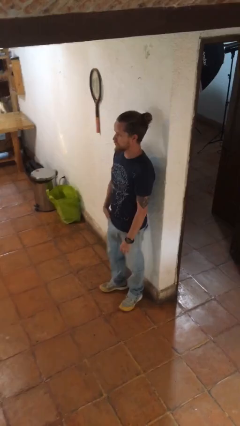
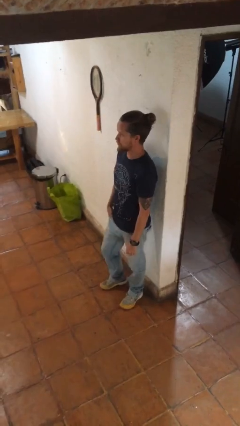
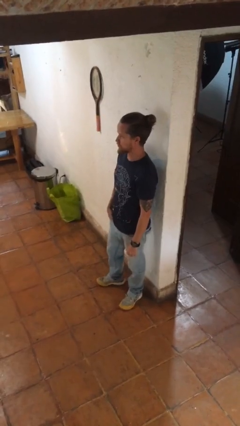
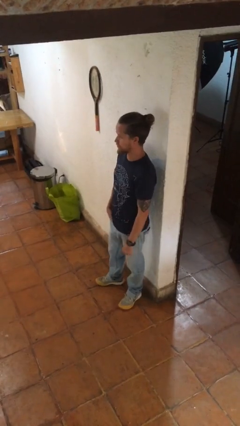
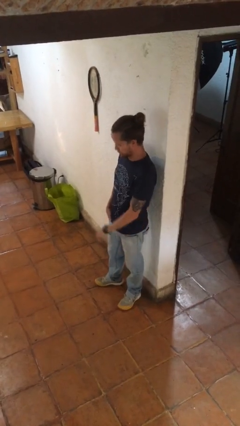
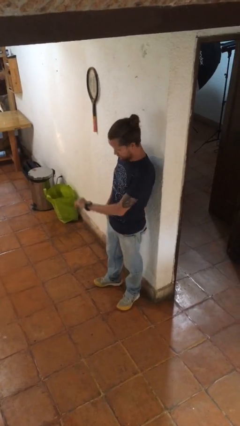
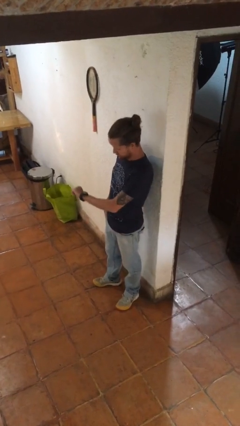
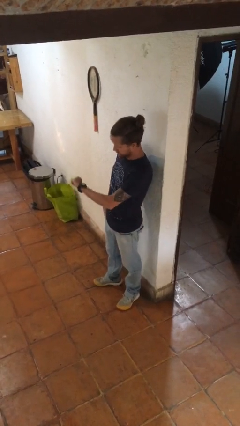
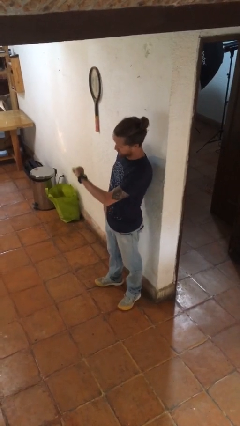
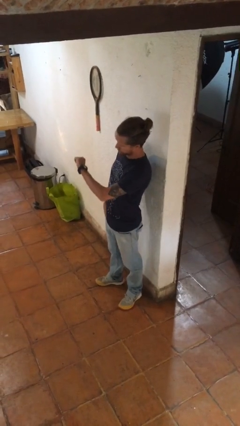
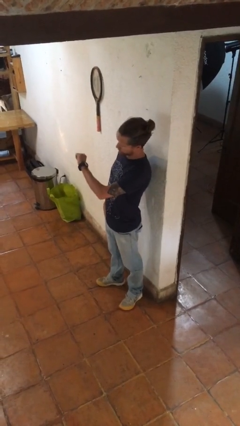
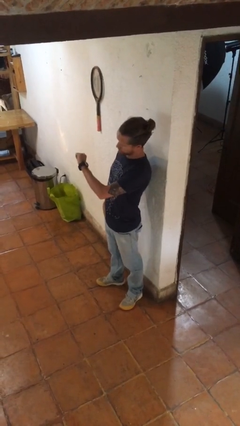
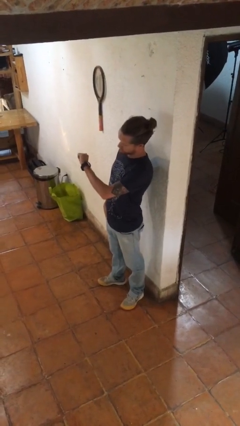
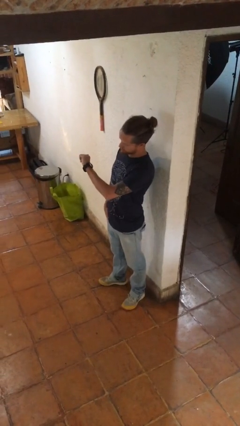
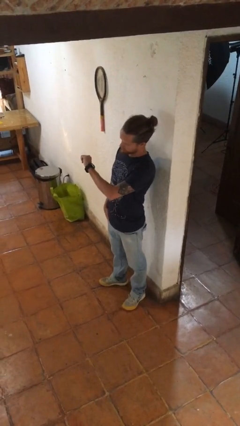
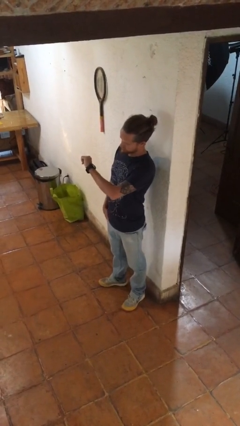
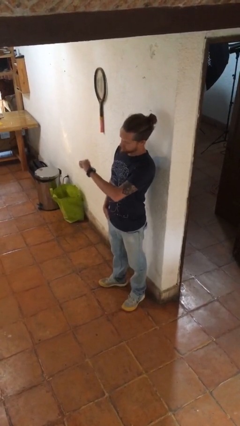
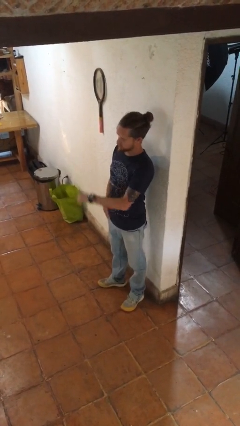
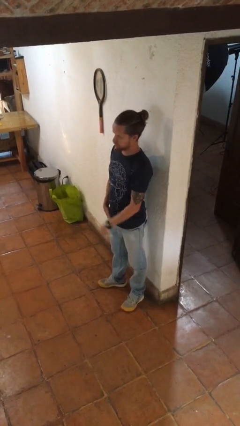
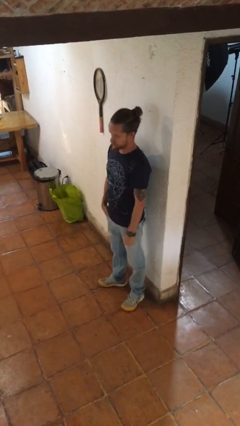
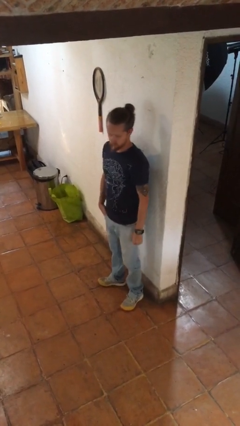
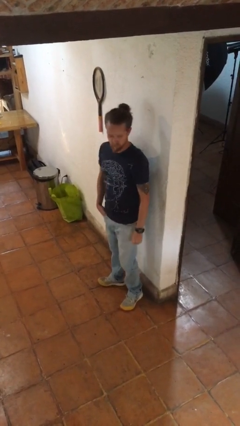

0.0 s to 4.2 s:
person looks at wristwatch

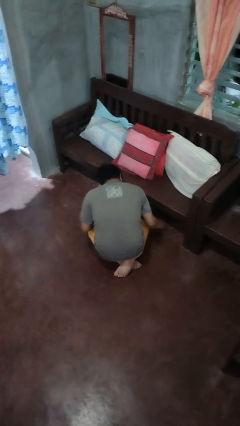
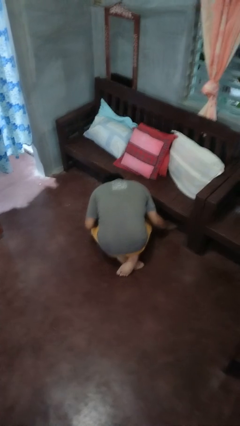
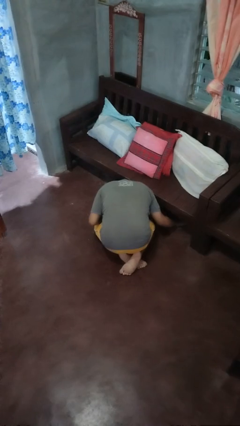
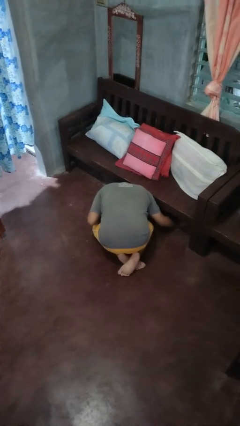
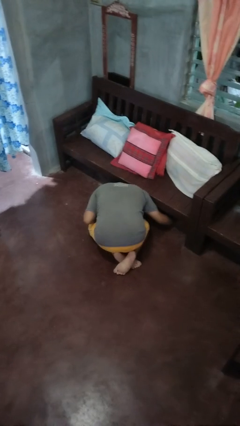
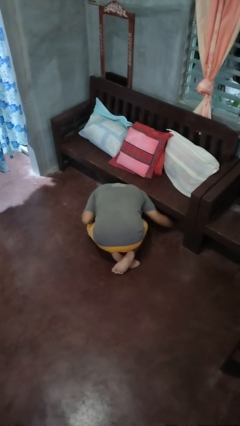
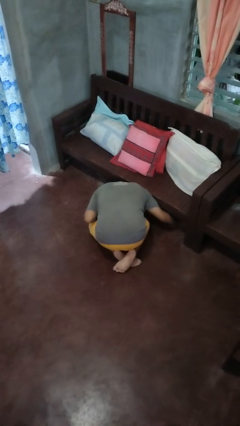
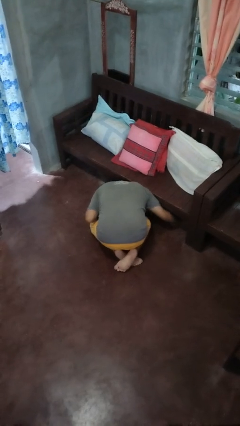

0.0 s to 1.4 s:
person searches under couch

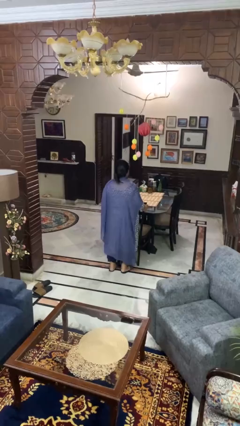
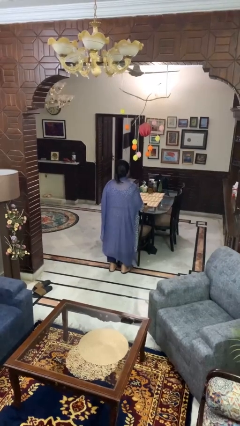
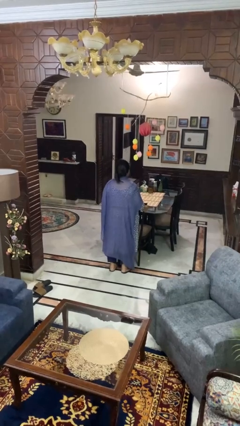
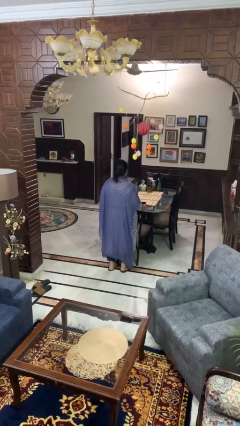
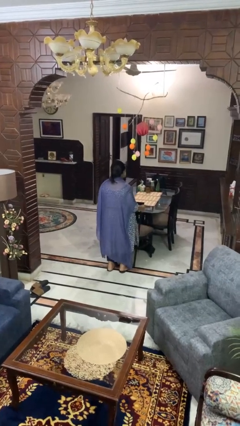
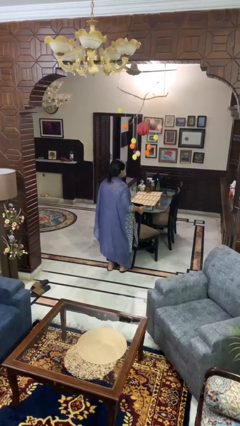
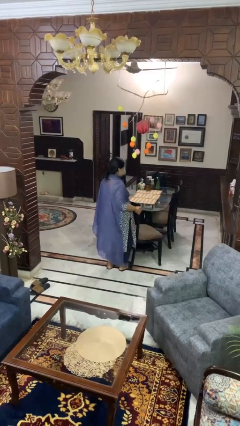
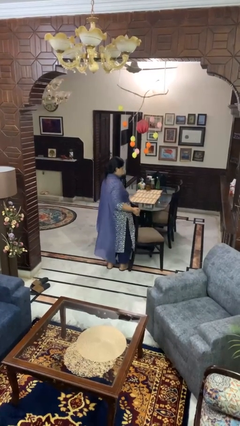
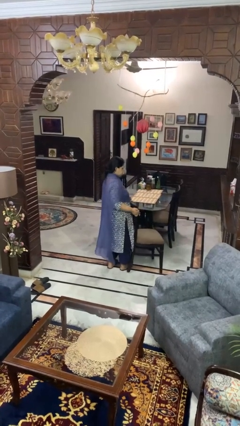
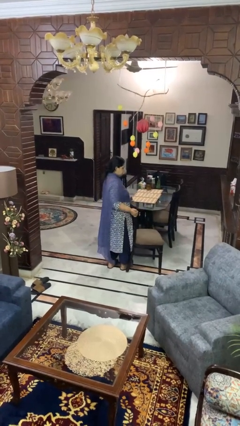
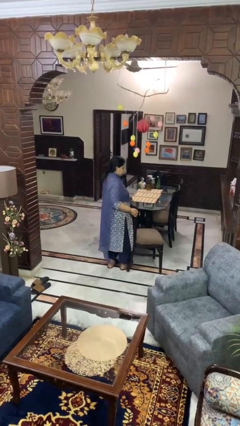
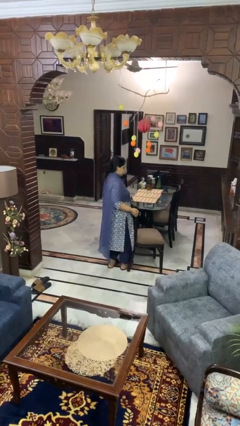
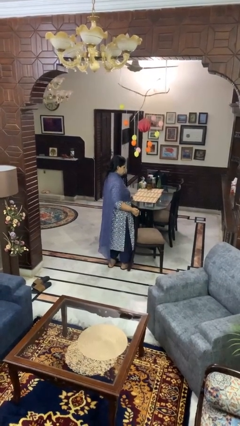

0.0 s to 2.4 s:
person pulls out chair

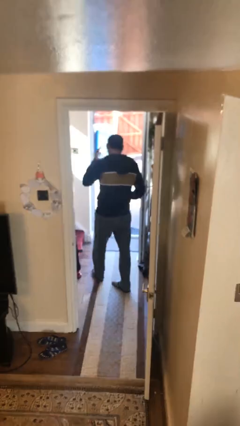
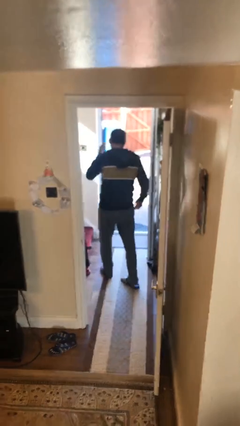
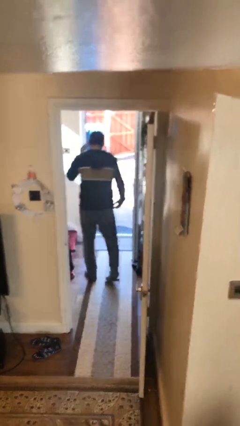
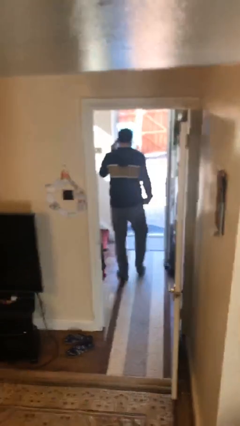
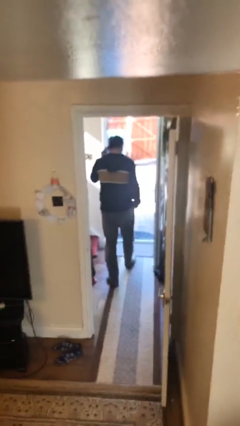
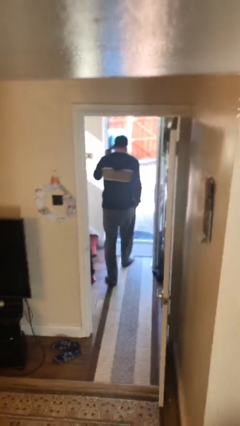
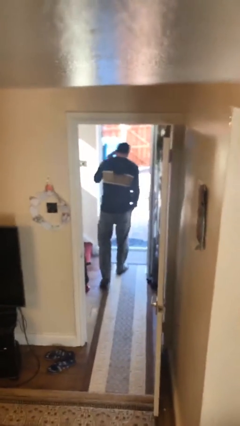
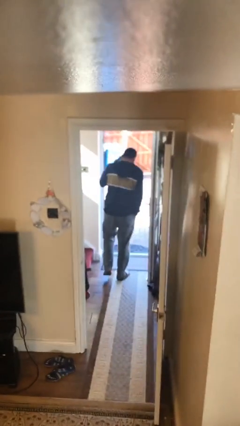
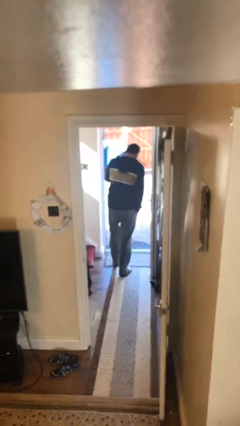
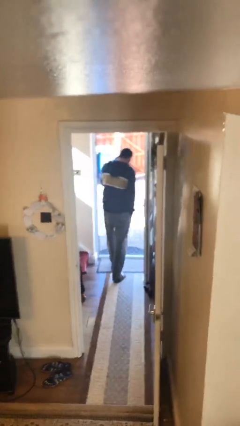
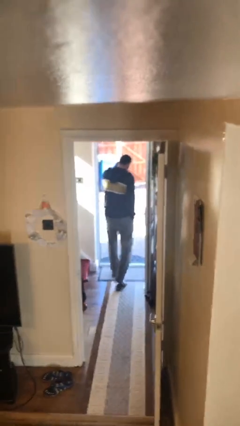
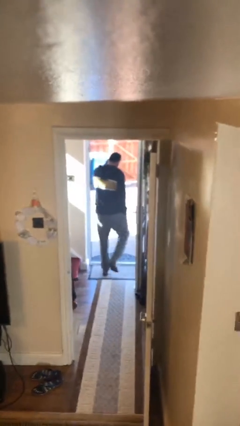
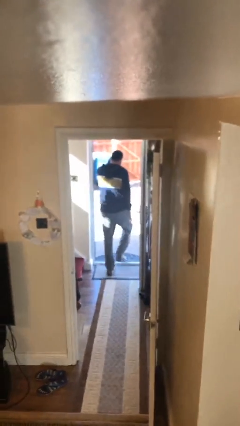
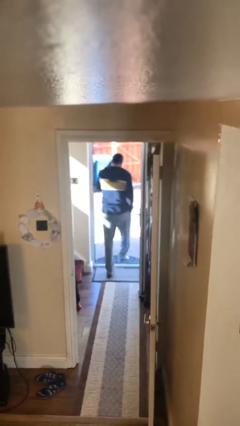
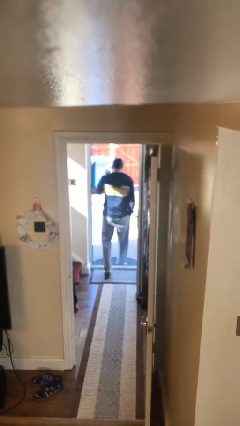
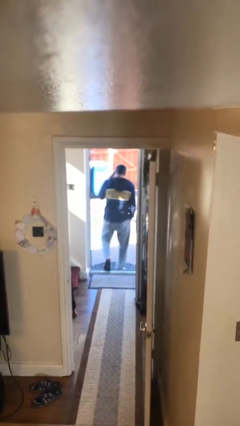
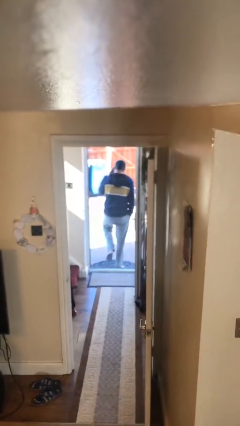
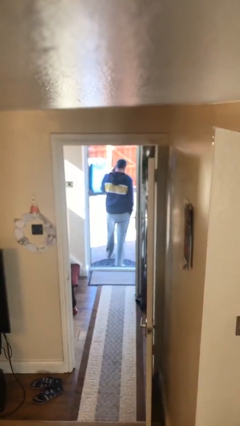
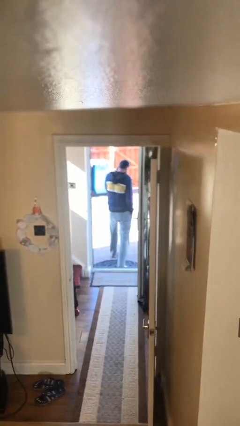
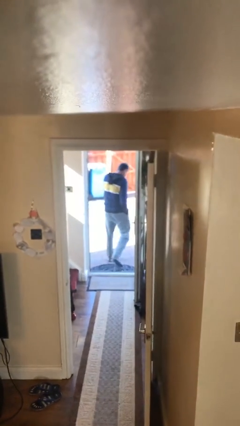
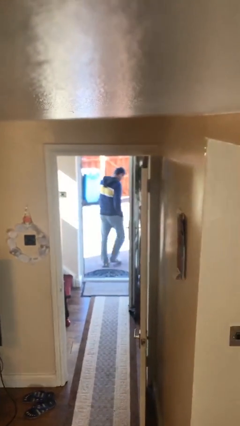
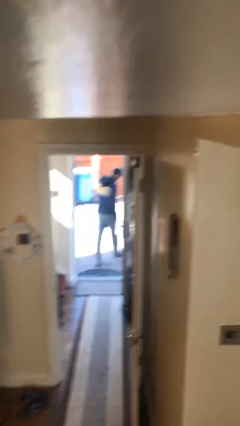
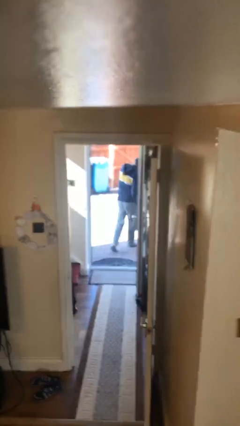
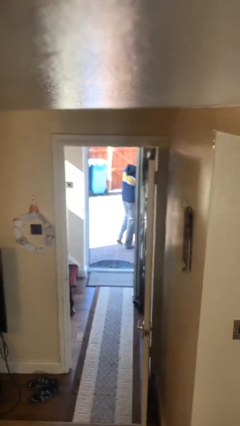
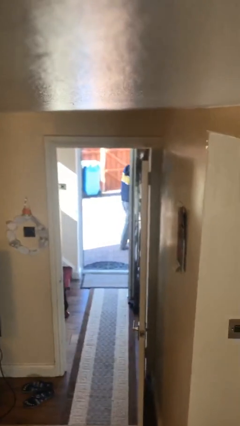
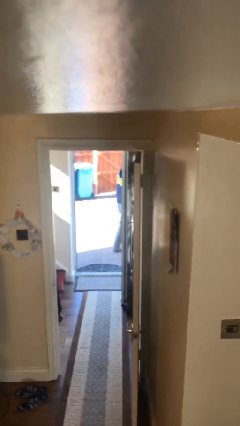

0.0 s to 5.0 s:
person exits scene through structure

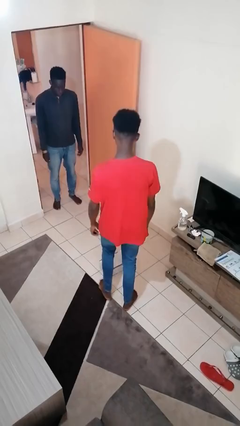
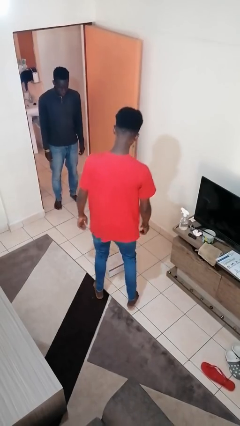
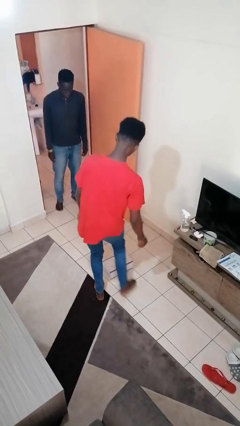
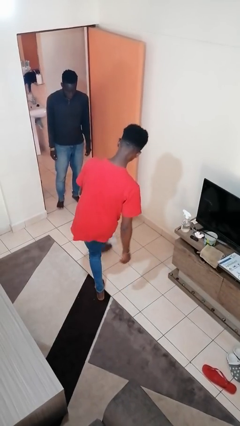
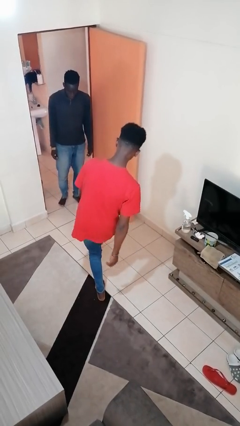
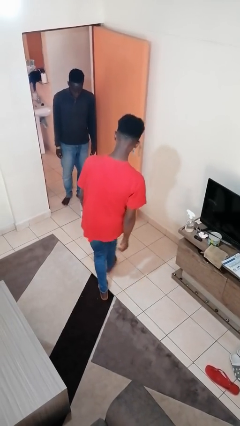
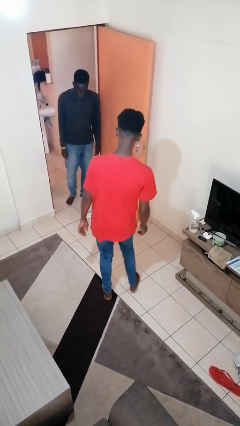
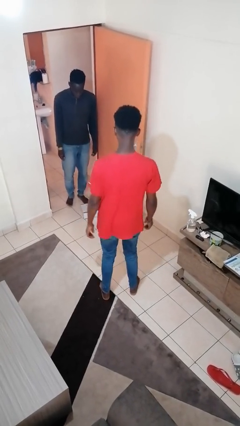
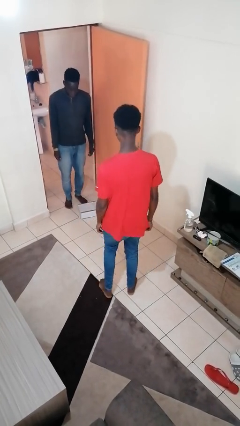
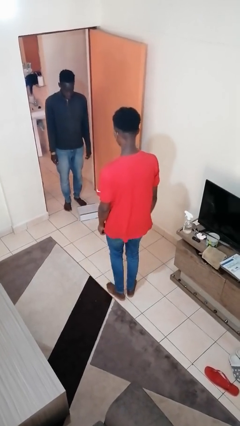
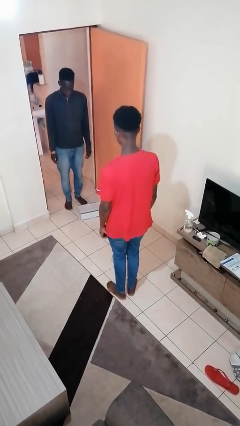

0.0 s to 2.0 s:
person kicks object to person

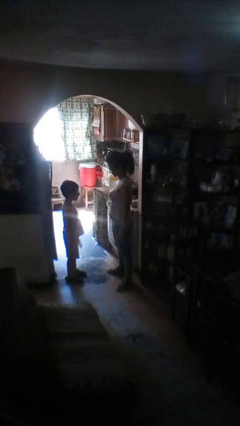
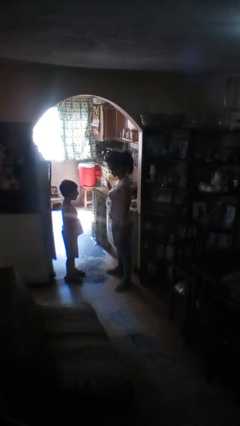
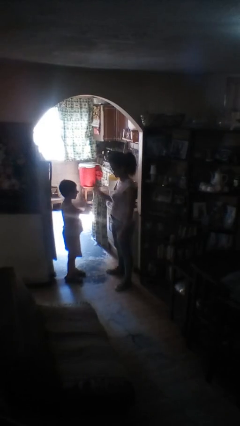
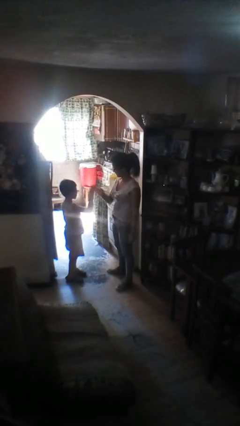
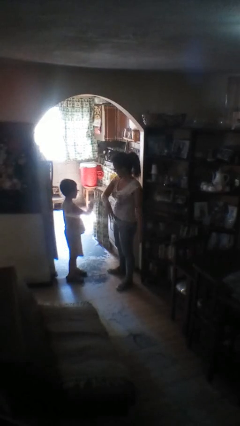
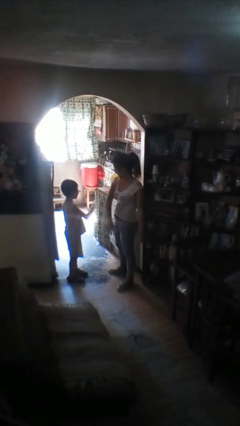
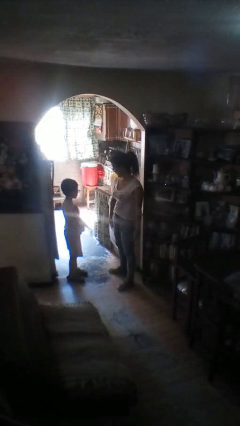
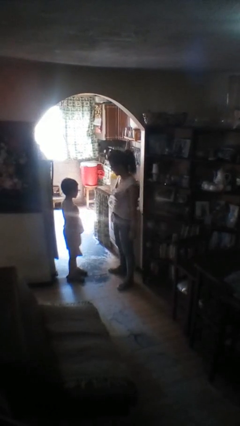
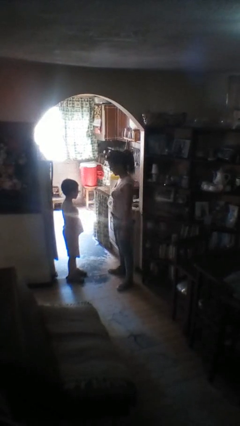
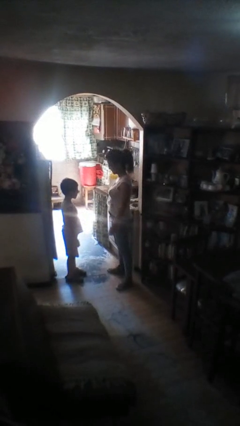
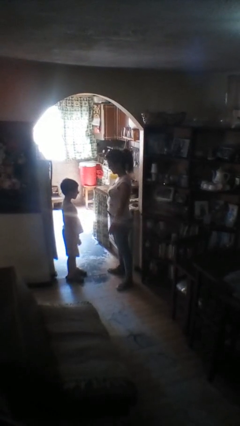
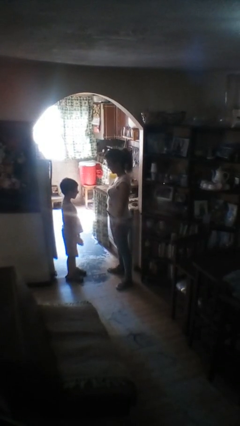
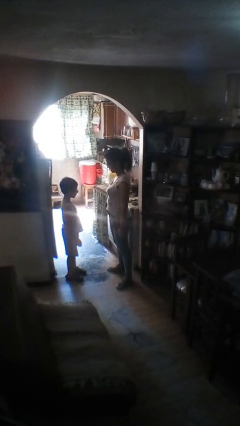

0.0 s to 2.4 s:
person highfives hand
